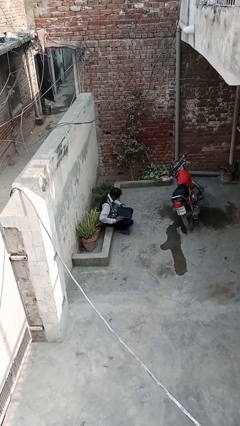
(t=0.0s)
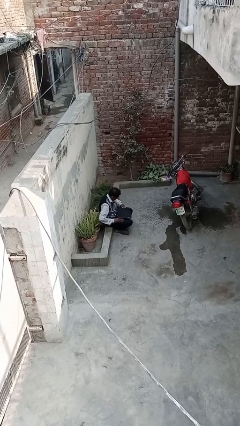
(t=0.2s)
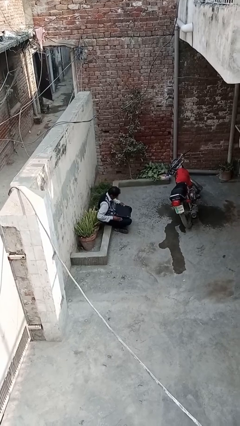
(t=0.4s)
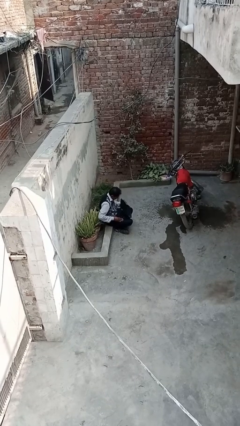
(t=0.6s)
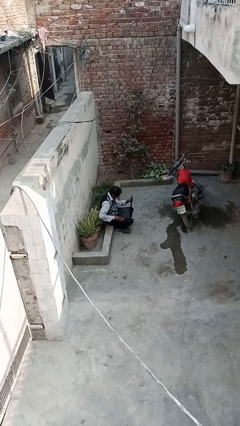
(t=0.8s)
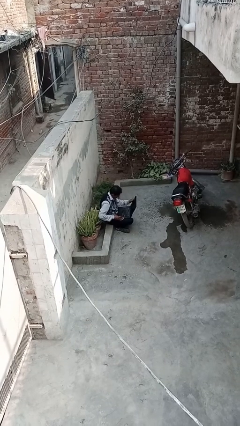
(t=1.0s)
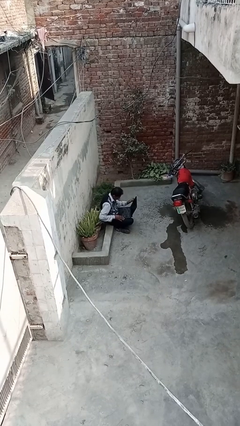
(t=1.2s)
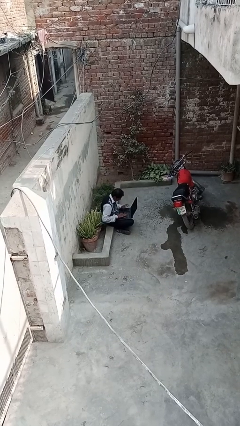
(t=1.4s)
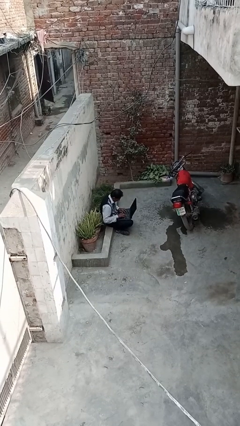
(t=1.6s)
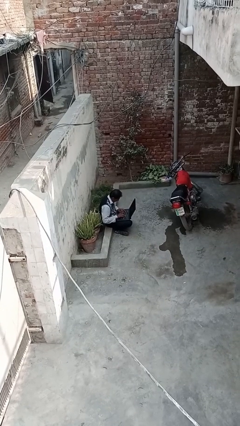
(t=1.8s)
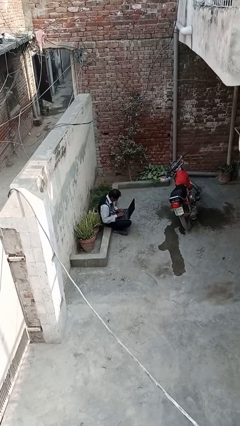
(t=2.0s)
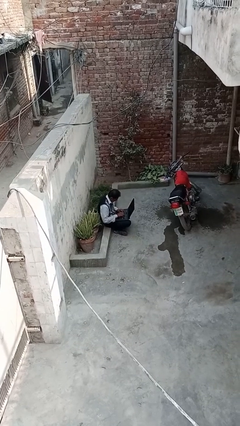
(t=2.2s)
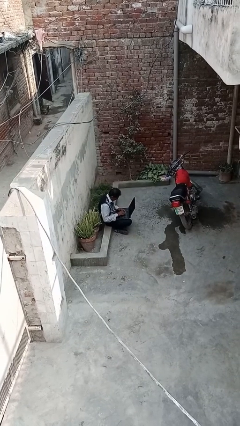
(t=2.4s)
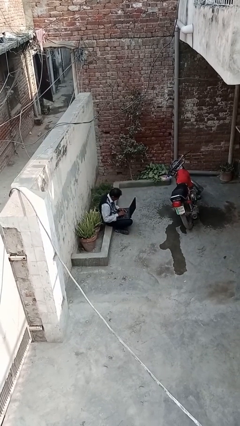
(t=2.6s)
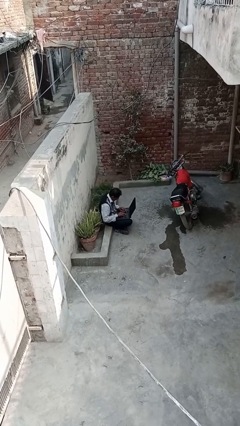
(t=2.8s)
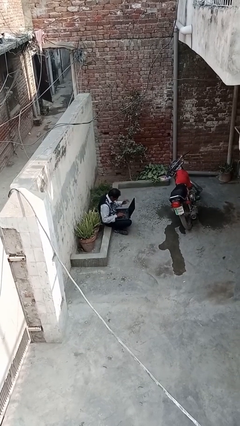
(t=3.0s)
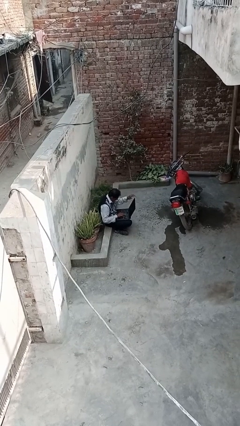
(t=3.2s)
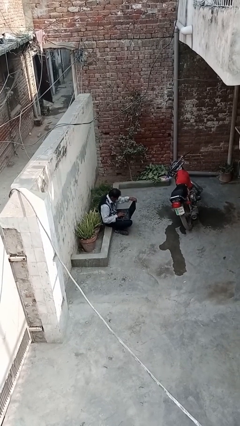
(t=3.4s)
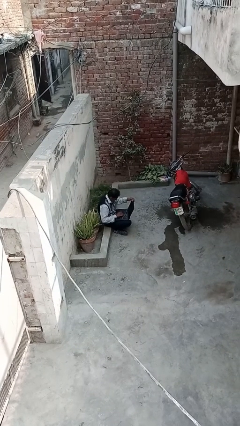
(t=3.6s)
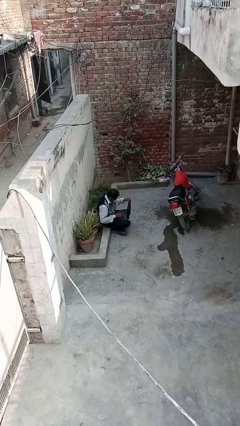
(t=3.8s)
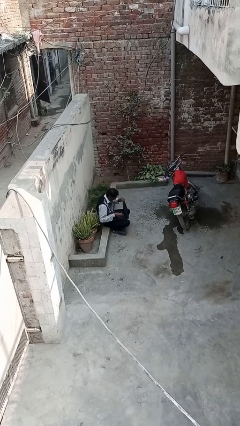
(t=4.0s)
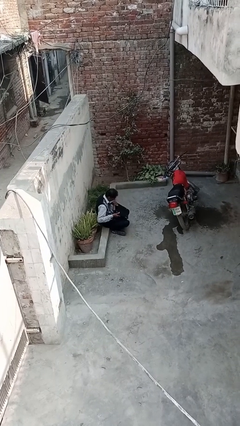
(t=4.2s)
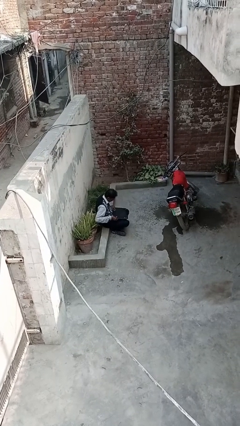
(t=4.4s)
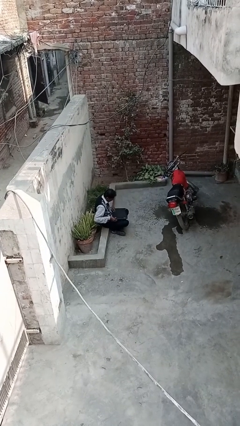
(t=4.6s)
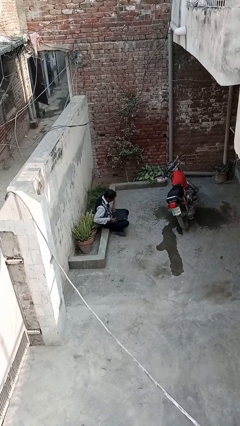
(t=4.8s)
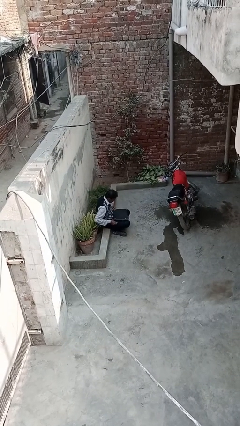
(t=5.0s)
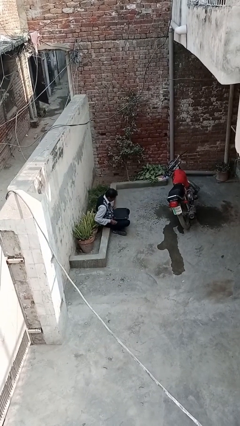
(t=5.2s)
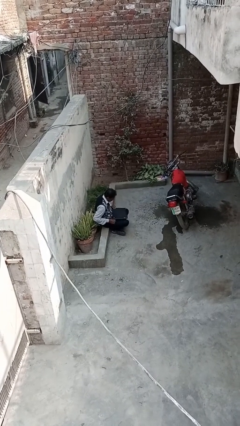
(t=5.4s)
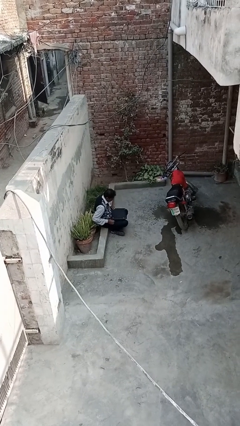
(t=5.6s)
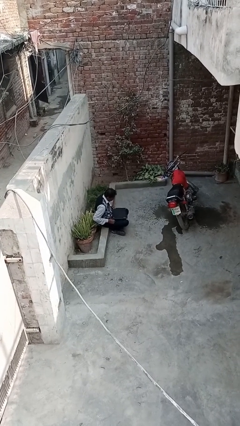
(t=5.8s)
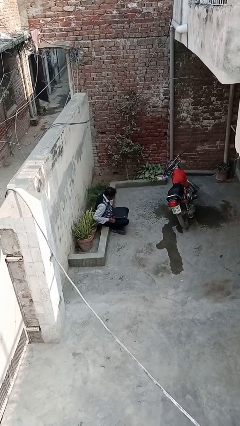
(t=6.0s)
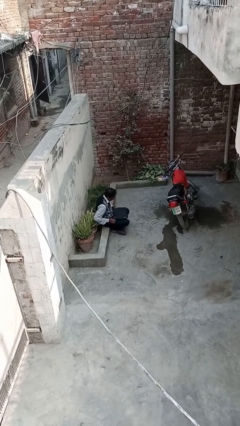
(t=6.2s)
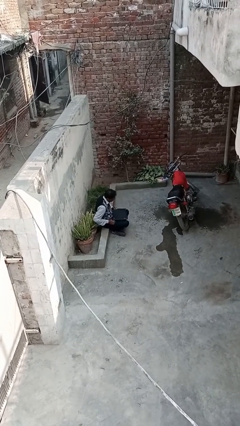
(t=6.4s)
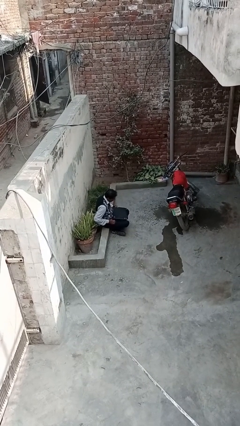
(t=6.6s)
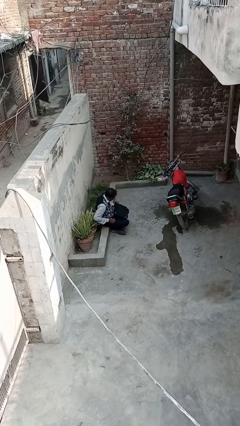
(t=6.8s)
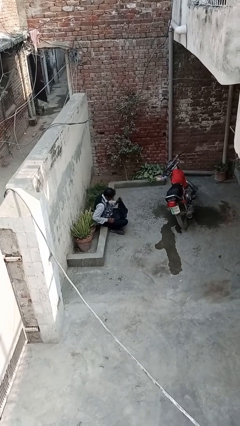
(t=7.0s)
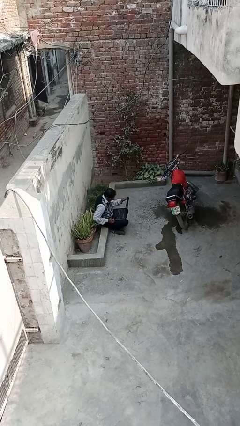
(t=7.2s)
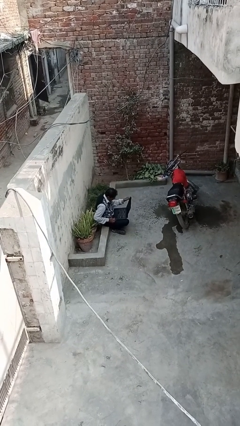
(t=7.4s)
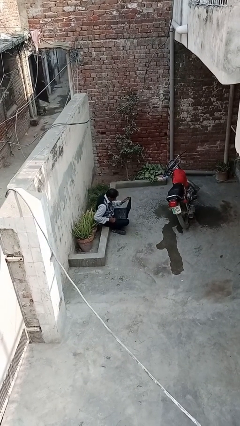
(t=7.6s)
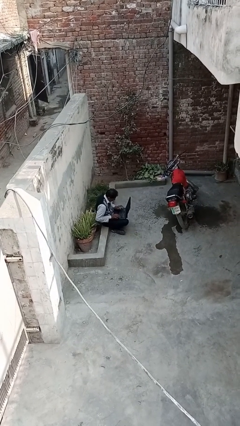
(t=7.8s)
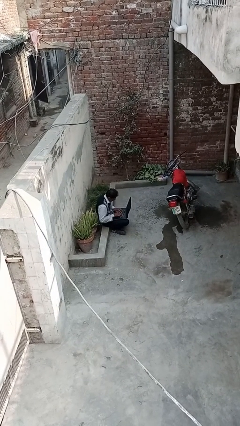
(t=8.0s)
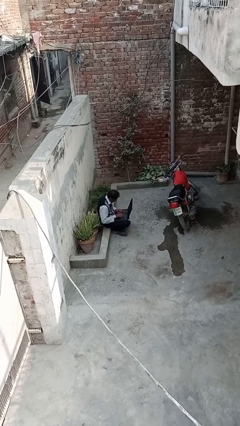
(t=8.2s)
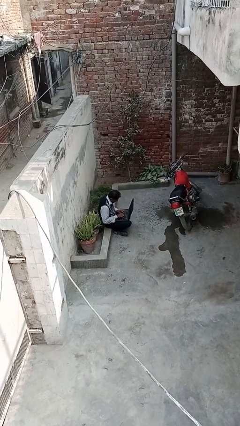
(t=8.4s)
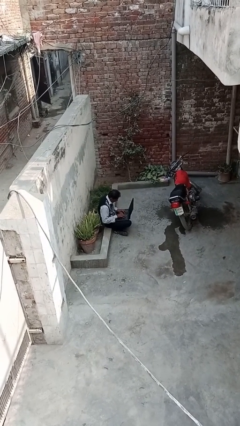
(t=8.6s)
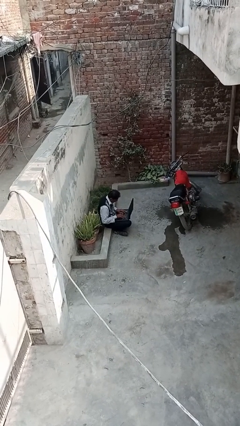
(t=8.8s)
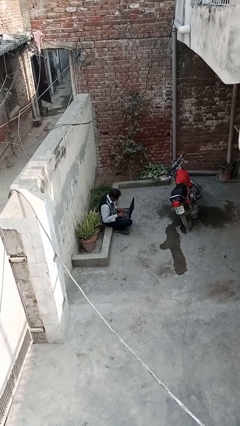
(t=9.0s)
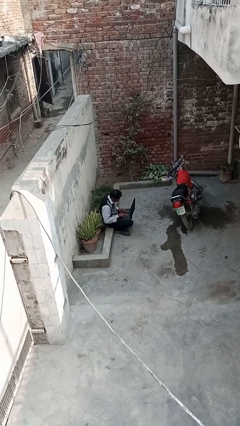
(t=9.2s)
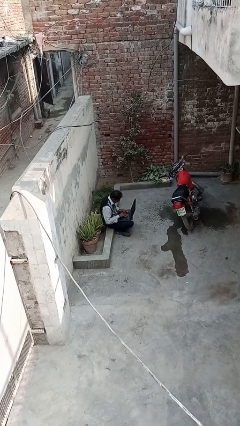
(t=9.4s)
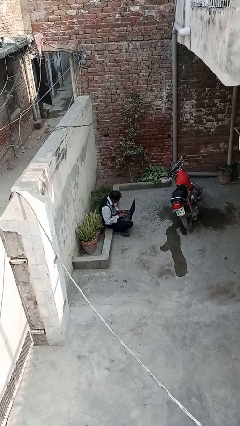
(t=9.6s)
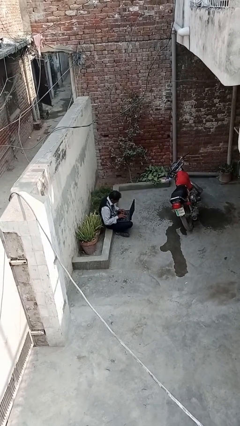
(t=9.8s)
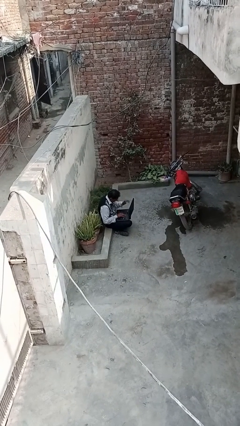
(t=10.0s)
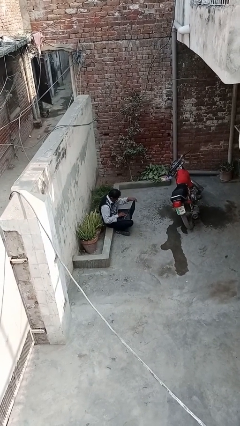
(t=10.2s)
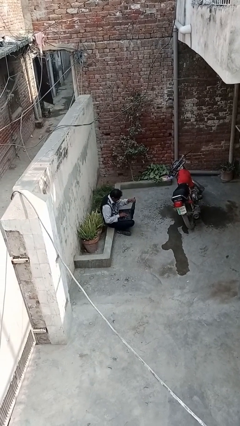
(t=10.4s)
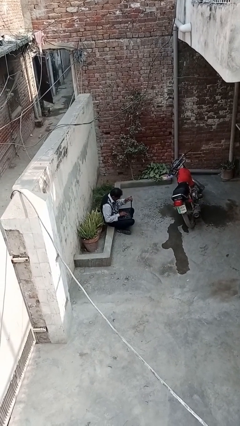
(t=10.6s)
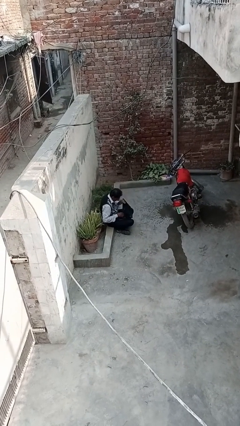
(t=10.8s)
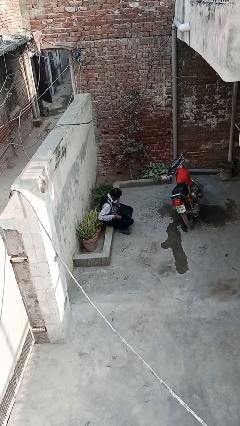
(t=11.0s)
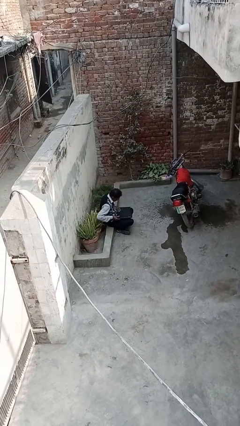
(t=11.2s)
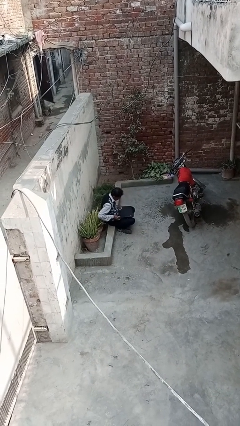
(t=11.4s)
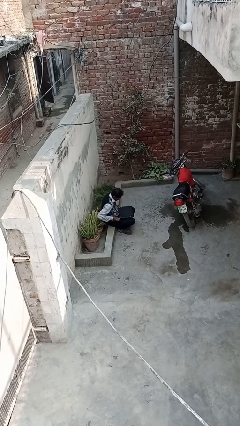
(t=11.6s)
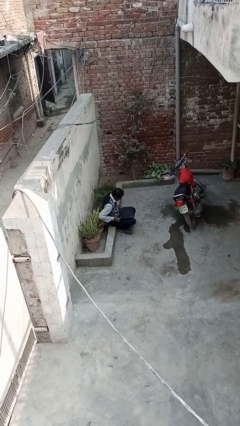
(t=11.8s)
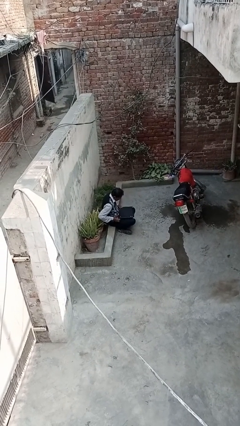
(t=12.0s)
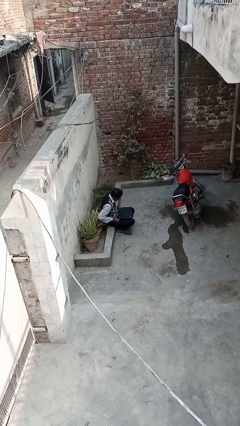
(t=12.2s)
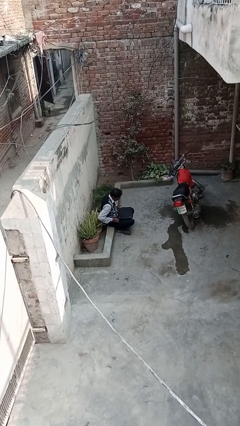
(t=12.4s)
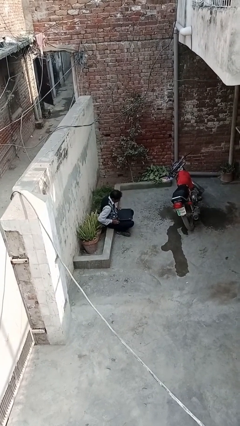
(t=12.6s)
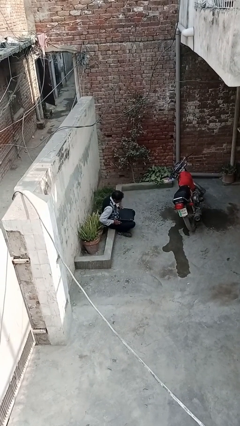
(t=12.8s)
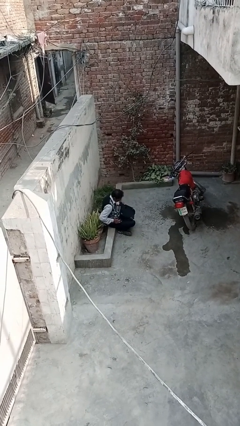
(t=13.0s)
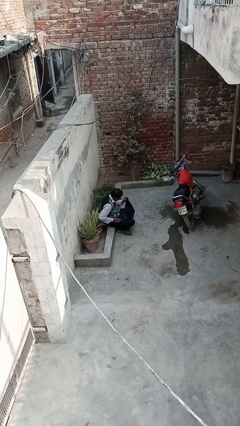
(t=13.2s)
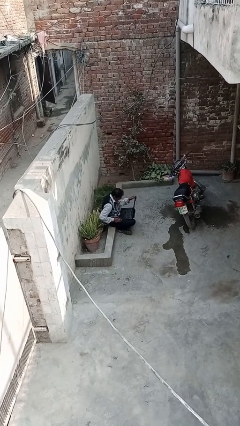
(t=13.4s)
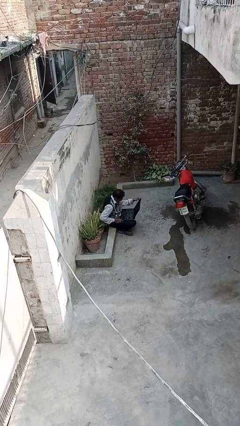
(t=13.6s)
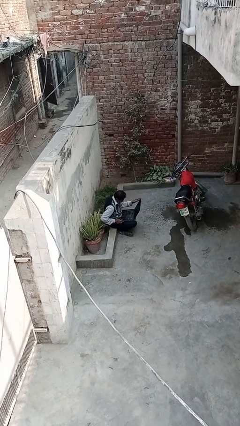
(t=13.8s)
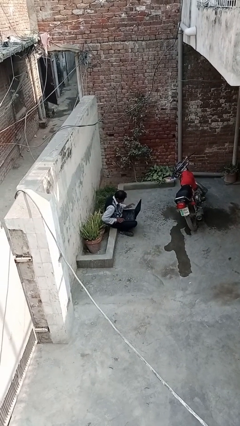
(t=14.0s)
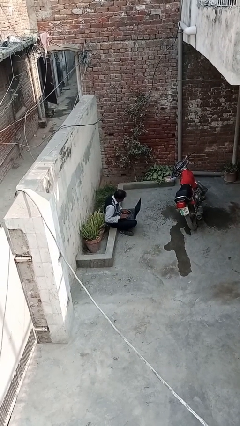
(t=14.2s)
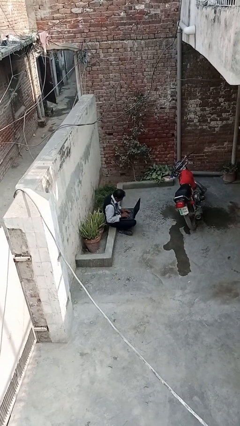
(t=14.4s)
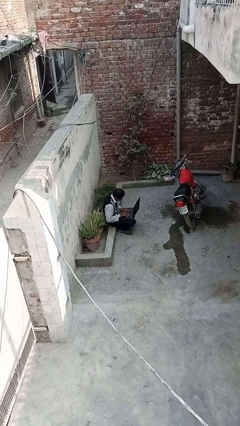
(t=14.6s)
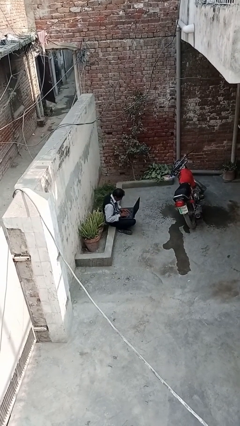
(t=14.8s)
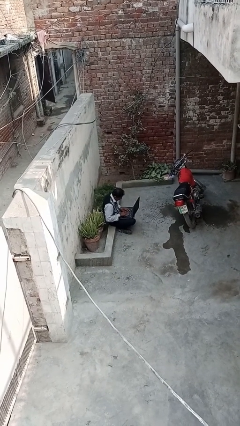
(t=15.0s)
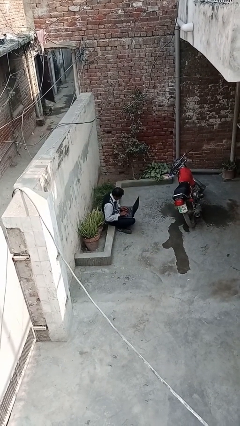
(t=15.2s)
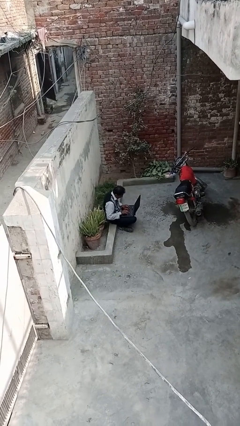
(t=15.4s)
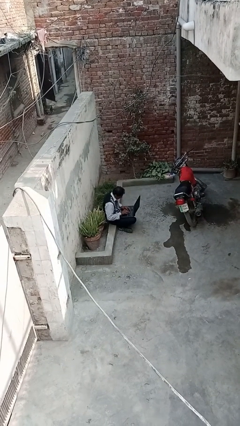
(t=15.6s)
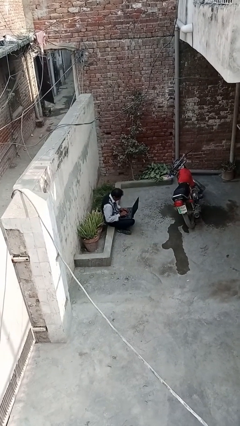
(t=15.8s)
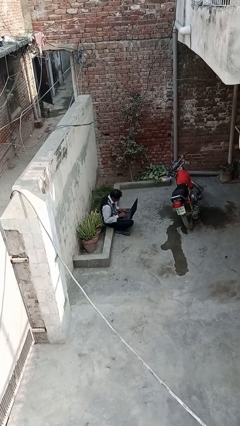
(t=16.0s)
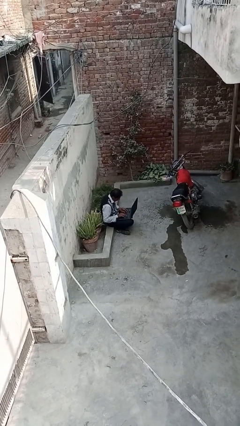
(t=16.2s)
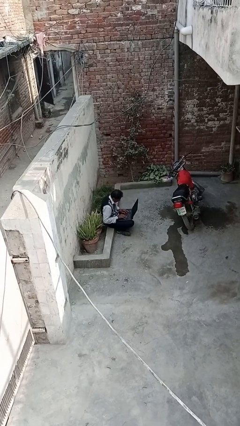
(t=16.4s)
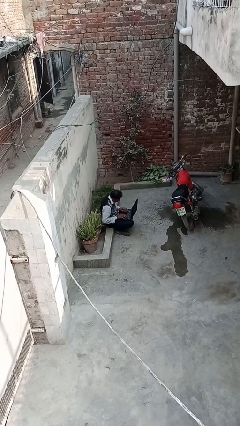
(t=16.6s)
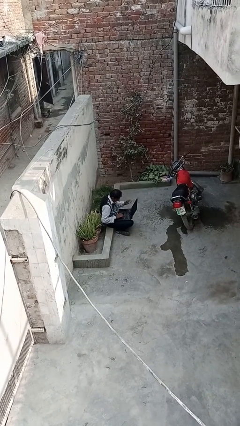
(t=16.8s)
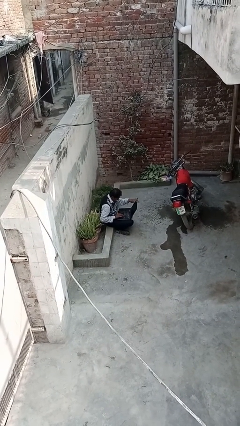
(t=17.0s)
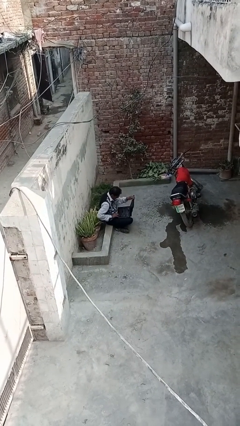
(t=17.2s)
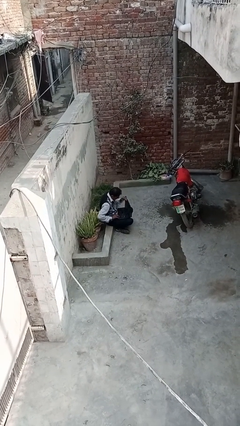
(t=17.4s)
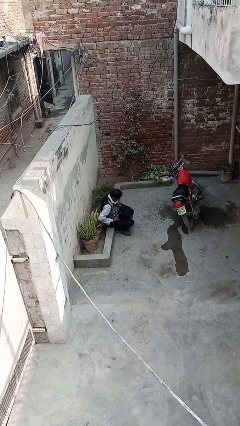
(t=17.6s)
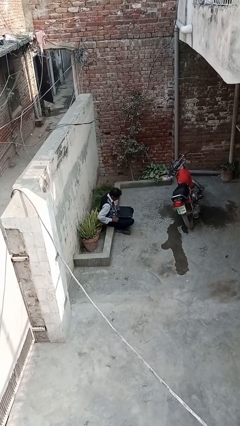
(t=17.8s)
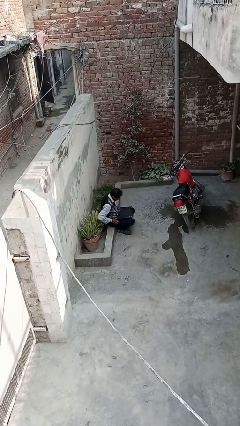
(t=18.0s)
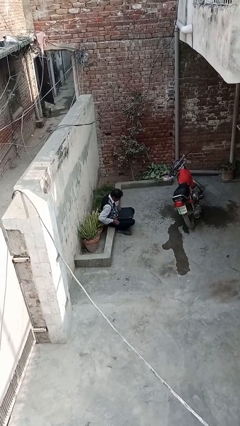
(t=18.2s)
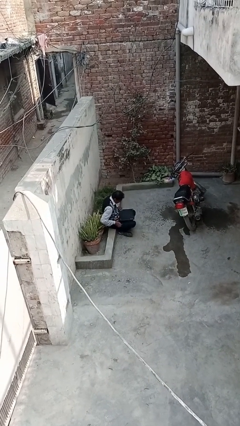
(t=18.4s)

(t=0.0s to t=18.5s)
person interacts with laptop
